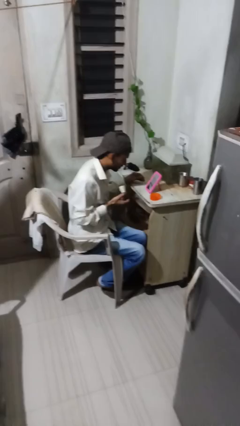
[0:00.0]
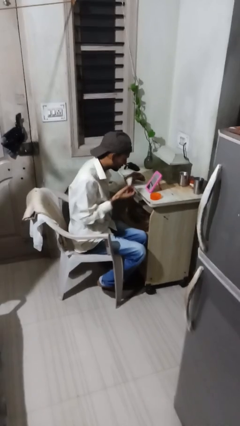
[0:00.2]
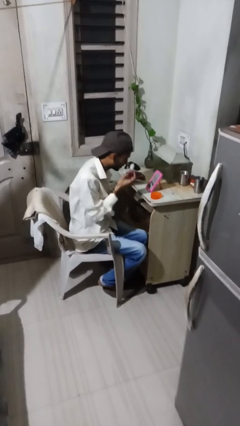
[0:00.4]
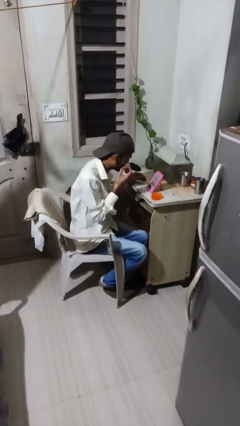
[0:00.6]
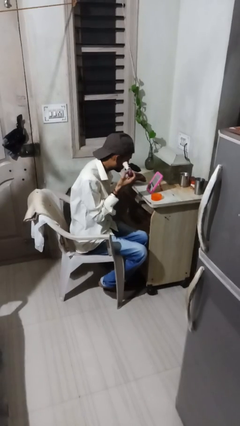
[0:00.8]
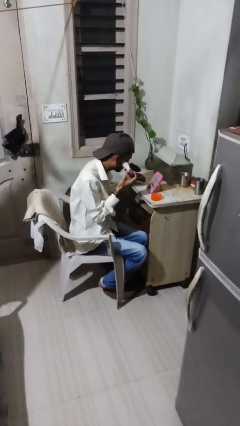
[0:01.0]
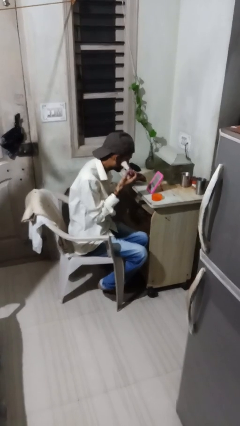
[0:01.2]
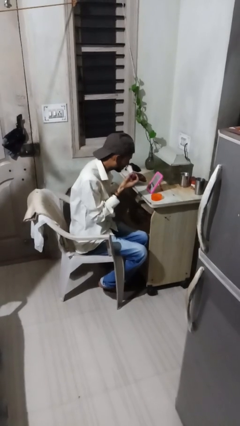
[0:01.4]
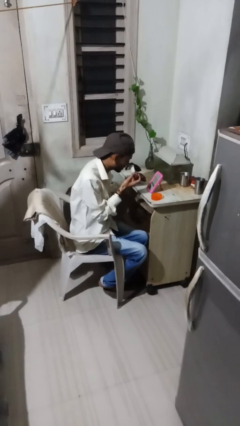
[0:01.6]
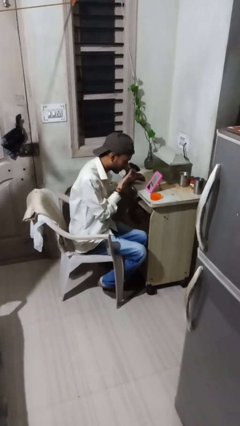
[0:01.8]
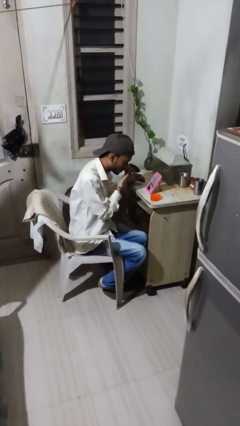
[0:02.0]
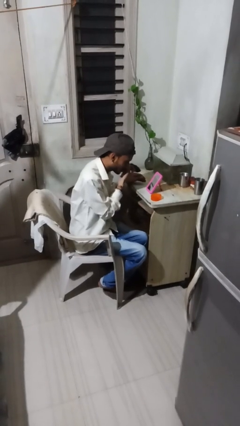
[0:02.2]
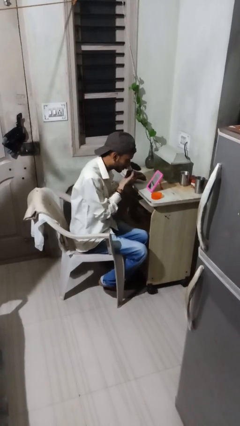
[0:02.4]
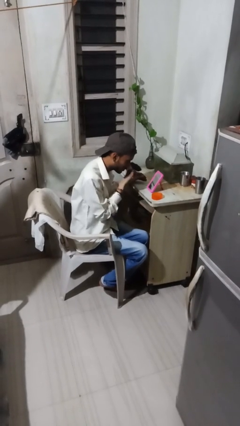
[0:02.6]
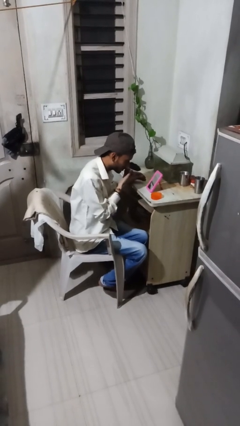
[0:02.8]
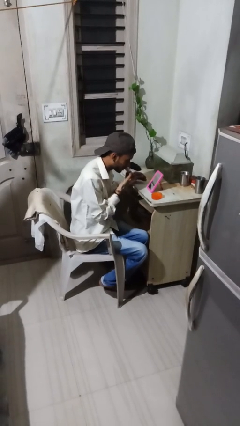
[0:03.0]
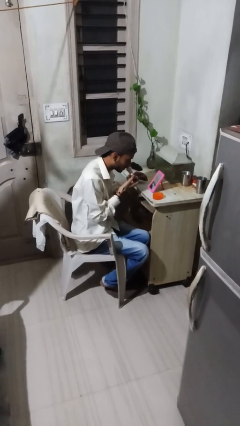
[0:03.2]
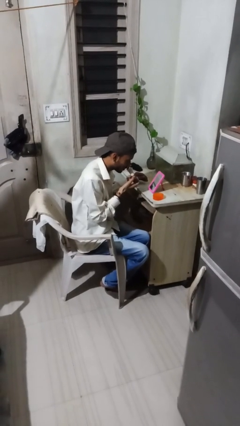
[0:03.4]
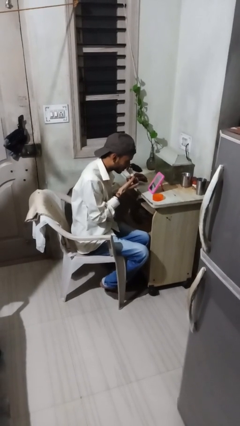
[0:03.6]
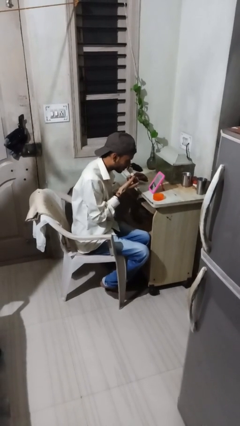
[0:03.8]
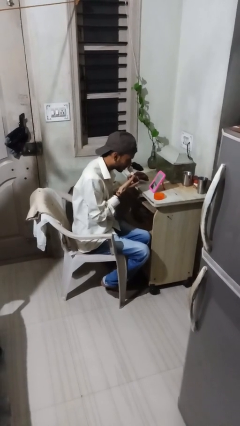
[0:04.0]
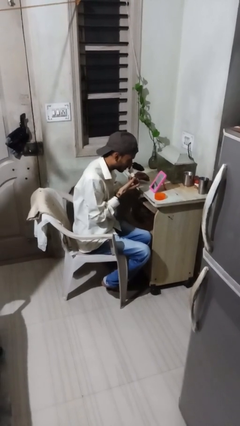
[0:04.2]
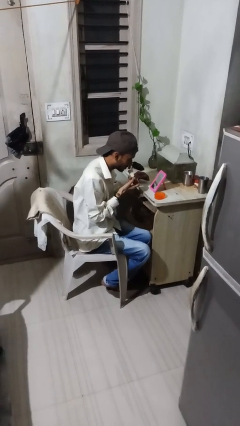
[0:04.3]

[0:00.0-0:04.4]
person applies foundation makeup

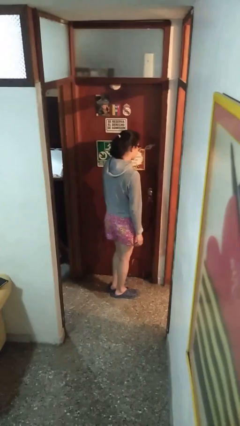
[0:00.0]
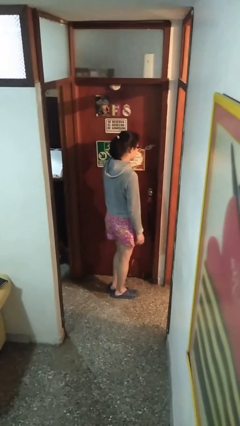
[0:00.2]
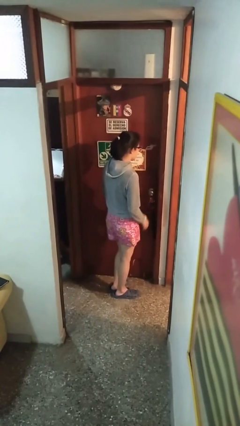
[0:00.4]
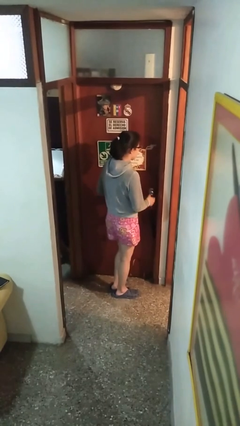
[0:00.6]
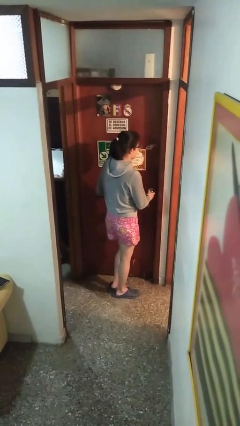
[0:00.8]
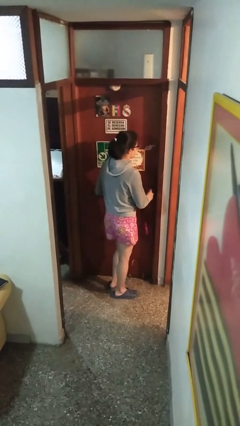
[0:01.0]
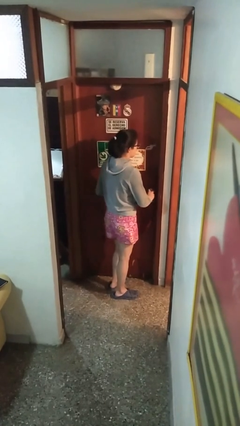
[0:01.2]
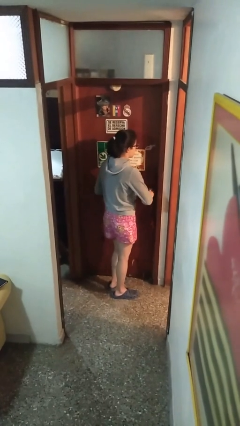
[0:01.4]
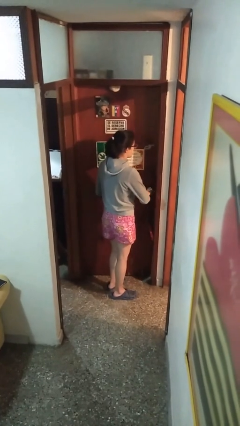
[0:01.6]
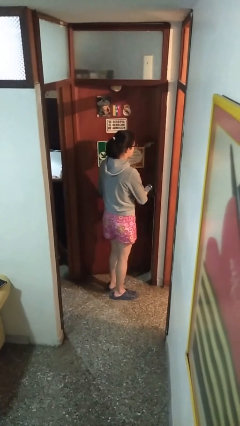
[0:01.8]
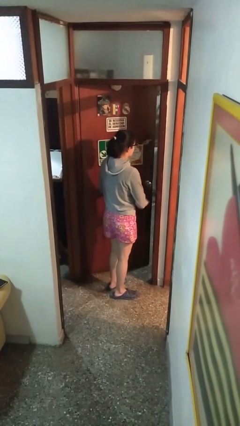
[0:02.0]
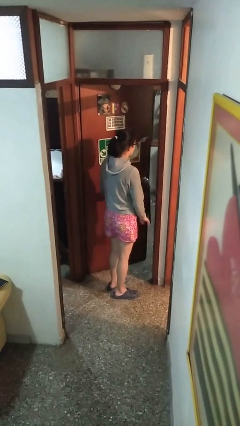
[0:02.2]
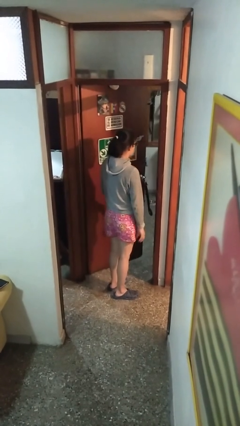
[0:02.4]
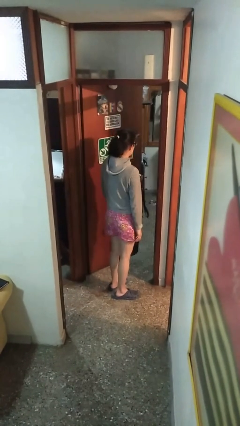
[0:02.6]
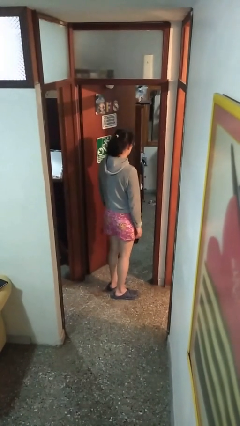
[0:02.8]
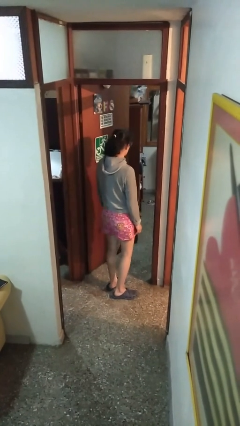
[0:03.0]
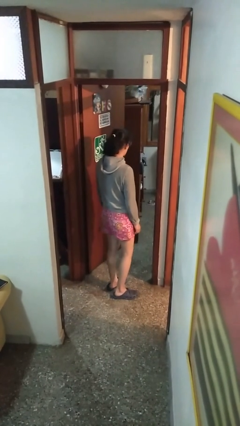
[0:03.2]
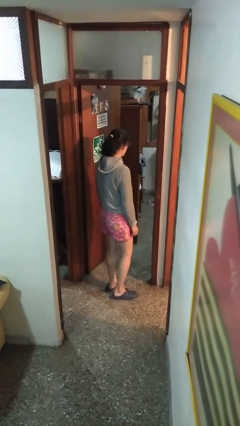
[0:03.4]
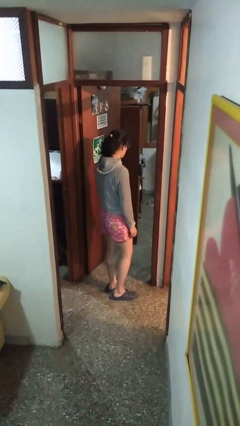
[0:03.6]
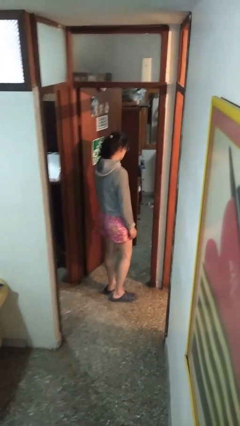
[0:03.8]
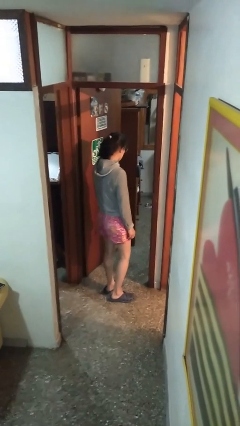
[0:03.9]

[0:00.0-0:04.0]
person opens facility door

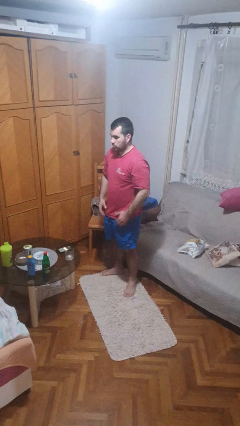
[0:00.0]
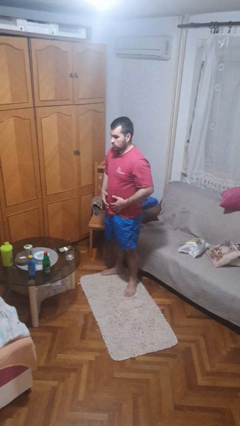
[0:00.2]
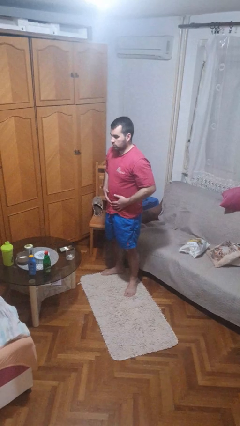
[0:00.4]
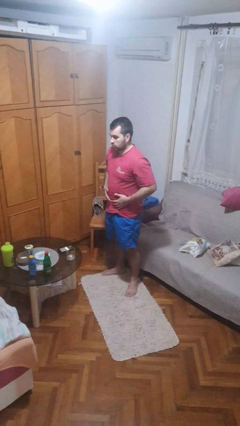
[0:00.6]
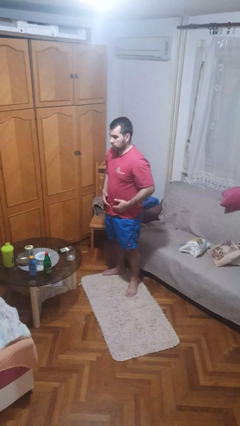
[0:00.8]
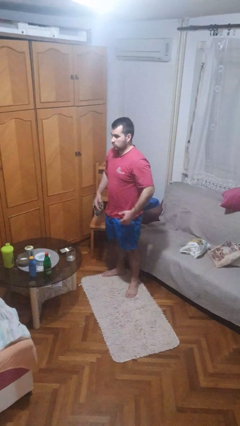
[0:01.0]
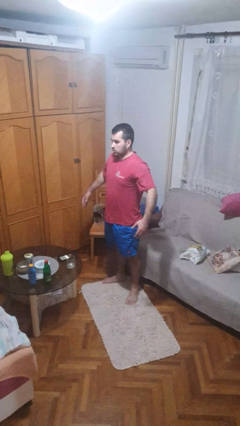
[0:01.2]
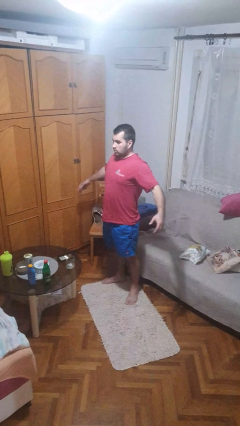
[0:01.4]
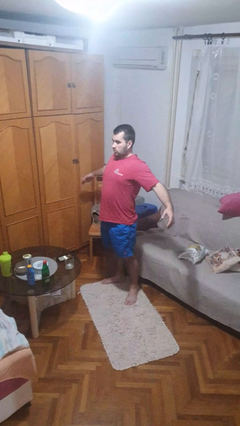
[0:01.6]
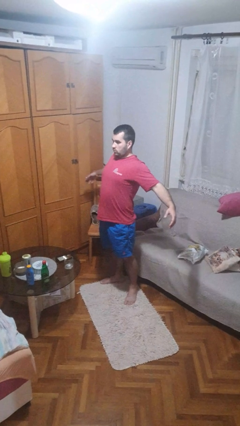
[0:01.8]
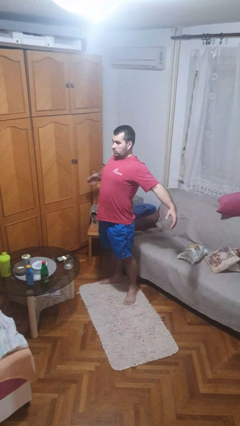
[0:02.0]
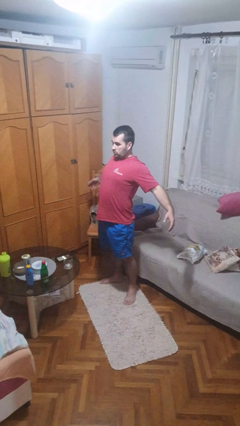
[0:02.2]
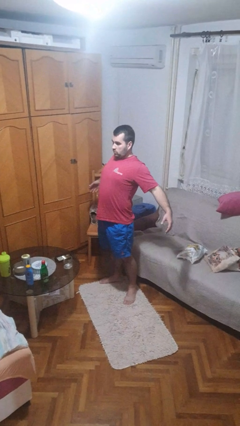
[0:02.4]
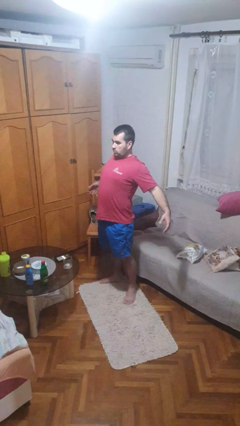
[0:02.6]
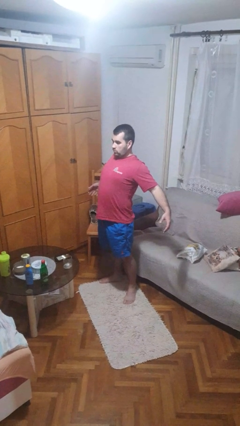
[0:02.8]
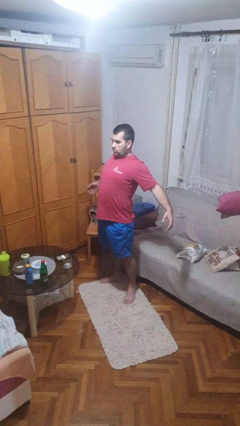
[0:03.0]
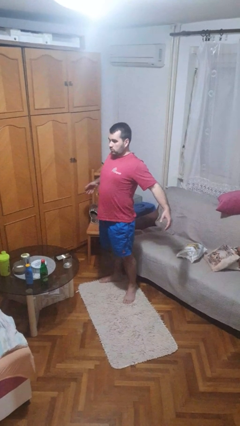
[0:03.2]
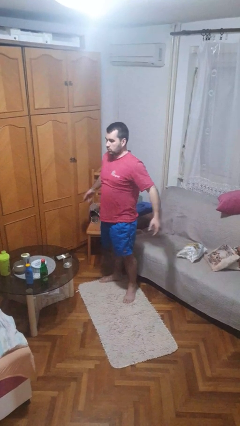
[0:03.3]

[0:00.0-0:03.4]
person stretches back

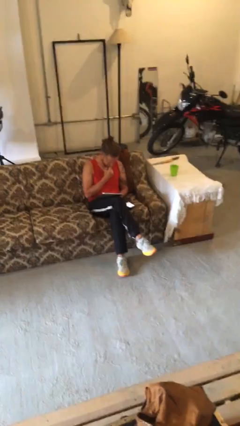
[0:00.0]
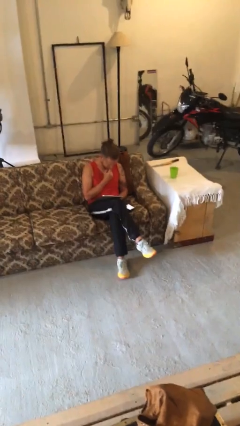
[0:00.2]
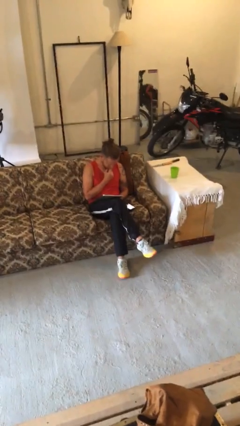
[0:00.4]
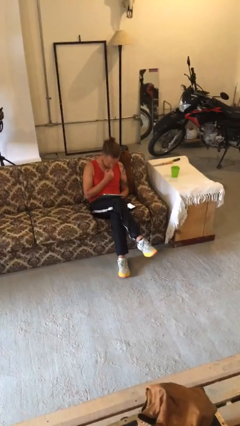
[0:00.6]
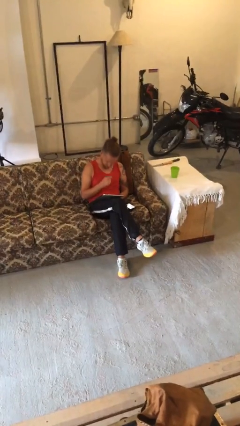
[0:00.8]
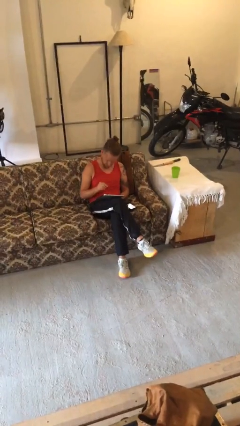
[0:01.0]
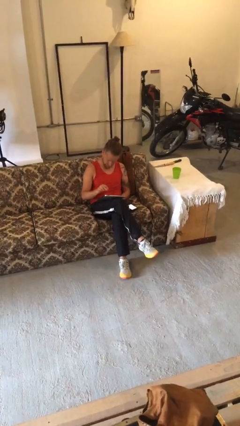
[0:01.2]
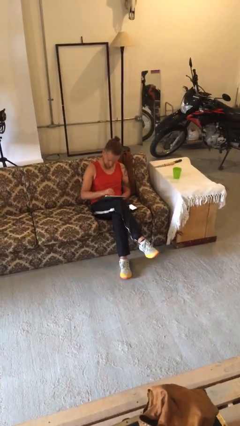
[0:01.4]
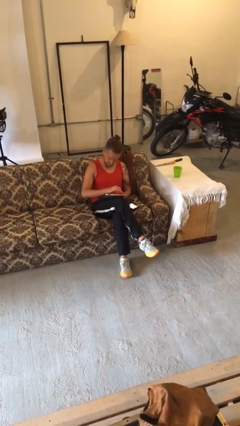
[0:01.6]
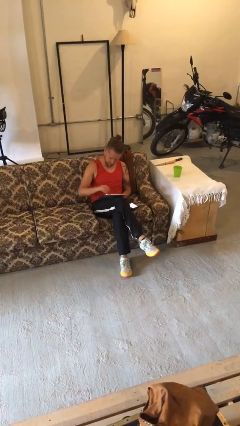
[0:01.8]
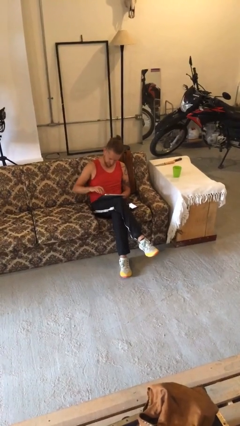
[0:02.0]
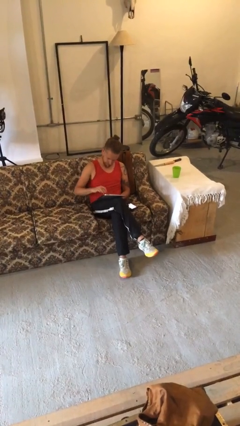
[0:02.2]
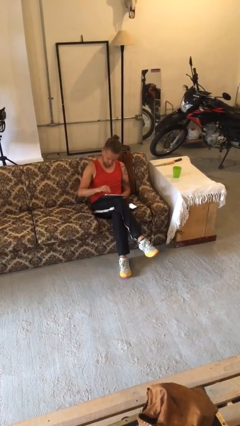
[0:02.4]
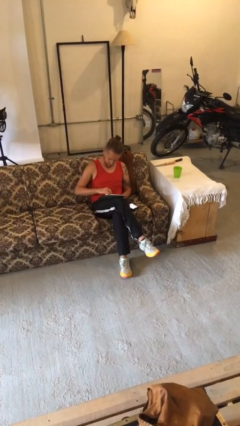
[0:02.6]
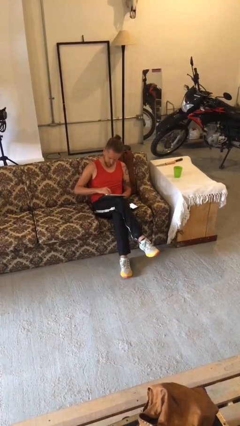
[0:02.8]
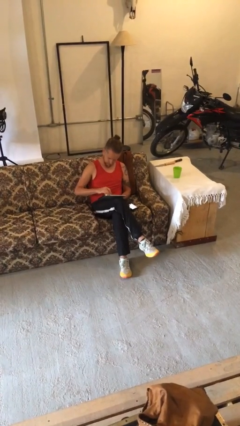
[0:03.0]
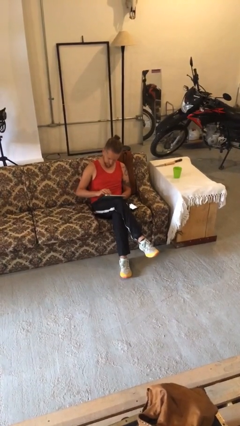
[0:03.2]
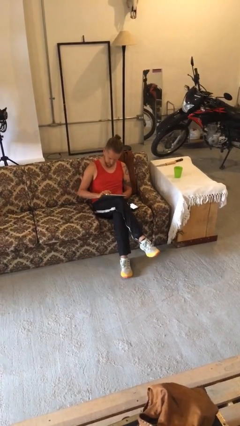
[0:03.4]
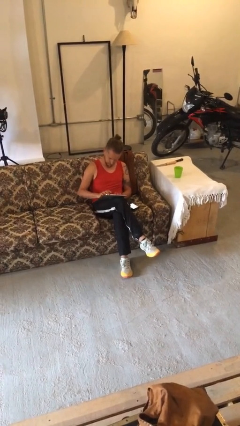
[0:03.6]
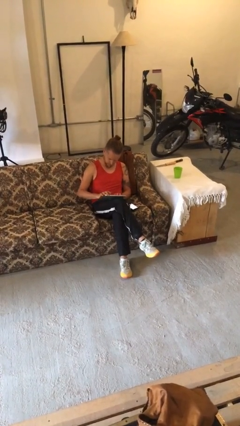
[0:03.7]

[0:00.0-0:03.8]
person interacts with tablet

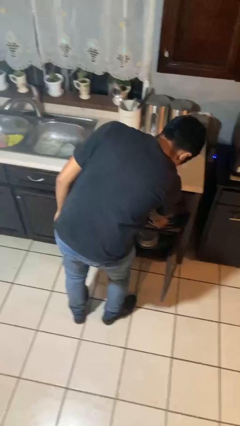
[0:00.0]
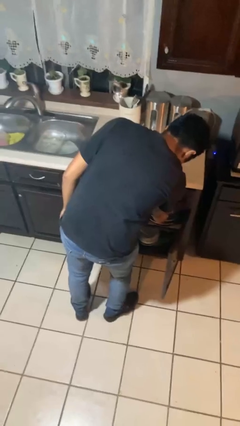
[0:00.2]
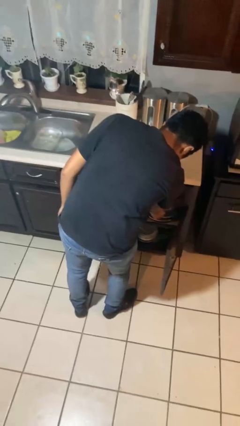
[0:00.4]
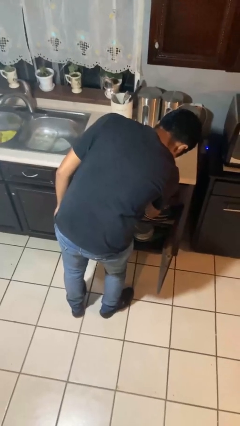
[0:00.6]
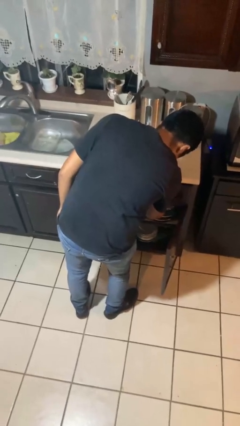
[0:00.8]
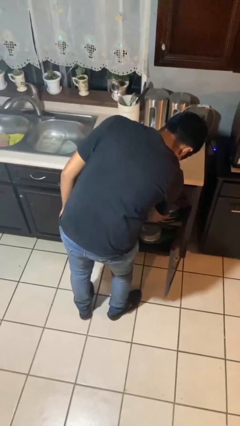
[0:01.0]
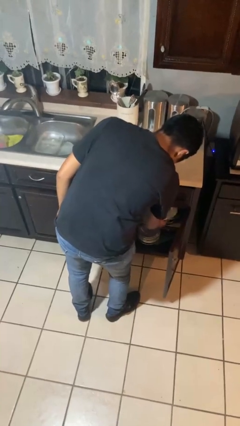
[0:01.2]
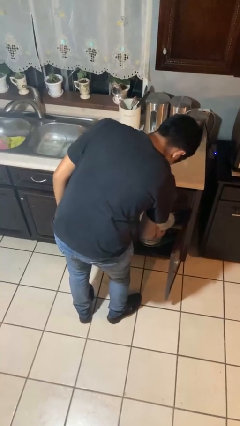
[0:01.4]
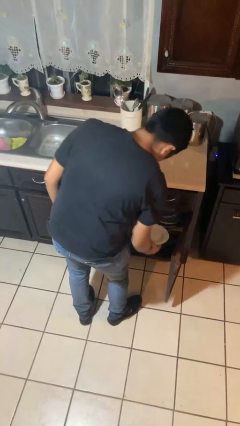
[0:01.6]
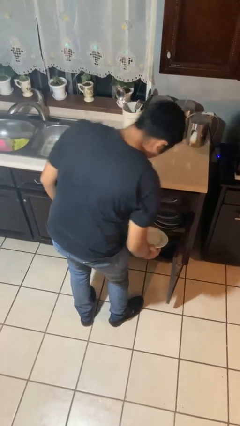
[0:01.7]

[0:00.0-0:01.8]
person puts object in cabinet

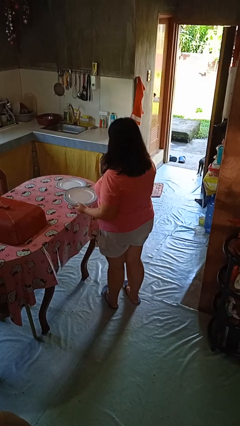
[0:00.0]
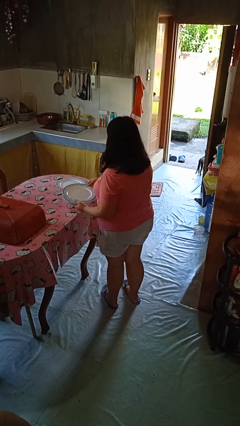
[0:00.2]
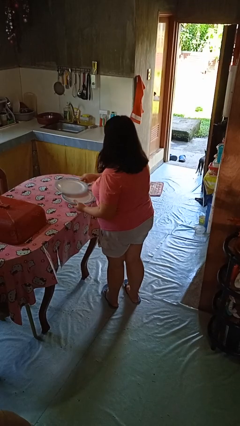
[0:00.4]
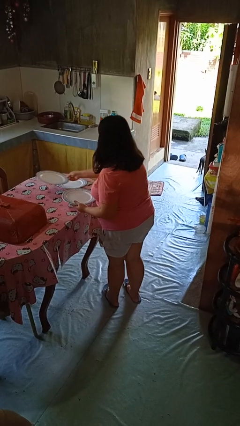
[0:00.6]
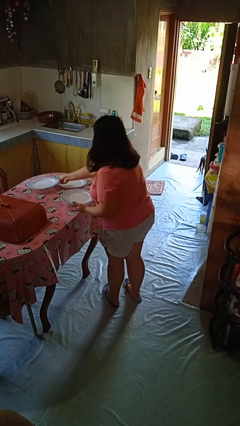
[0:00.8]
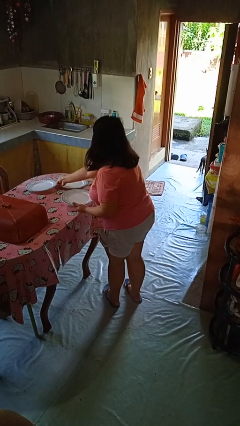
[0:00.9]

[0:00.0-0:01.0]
person sets table
